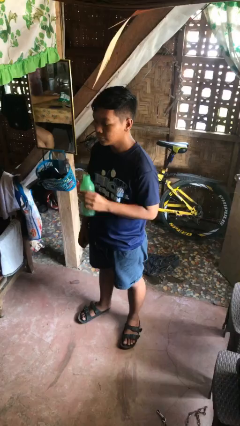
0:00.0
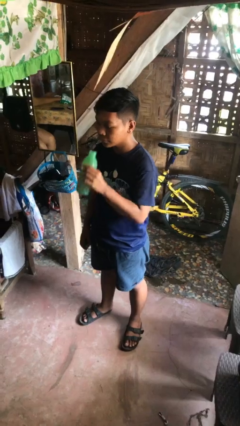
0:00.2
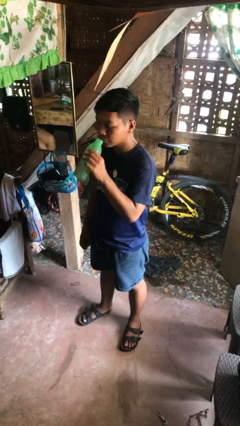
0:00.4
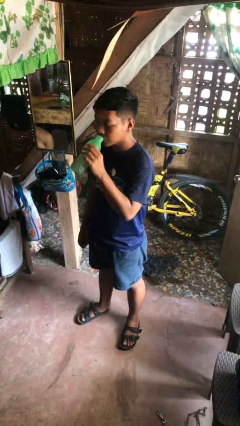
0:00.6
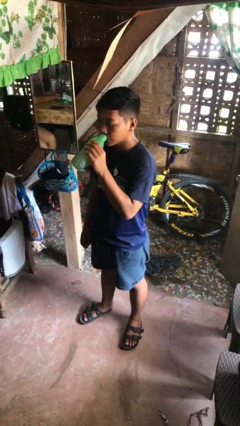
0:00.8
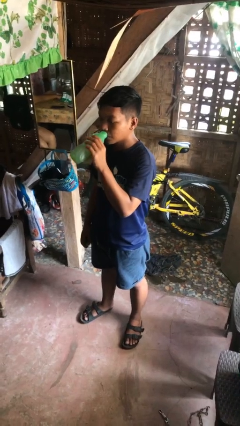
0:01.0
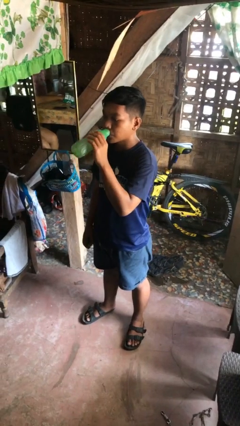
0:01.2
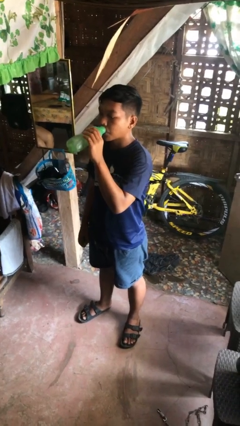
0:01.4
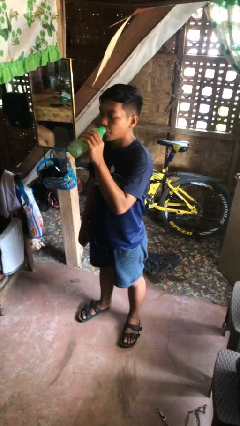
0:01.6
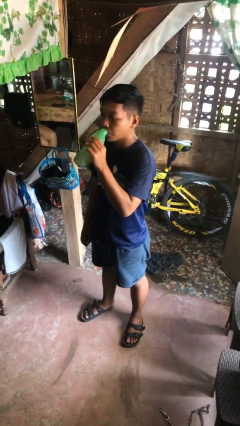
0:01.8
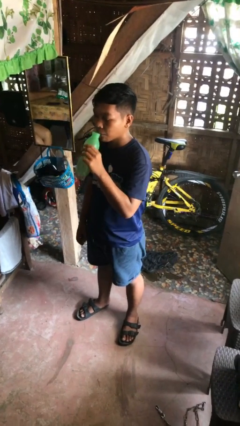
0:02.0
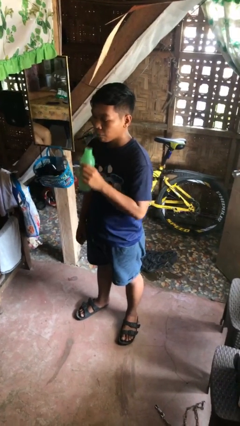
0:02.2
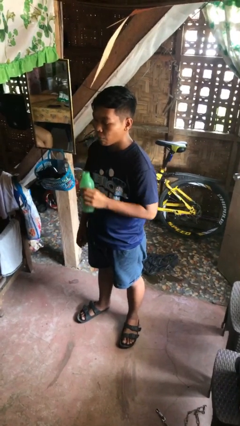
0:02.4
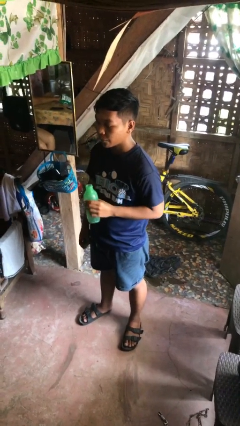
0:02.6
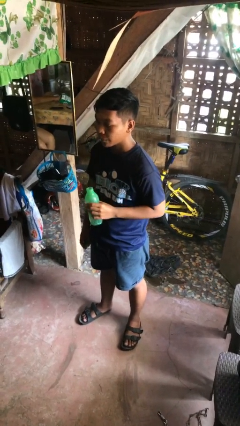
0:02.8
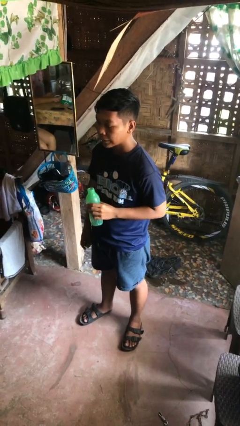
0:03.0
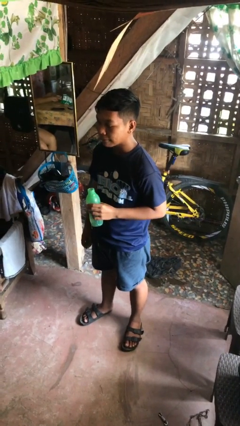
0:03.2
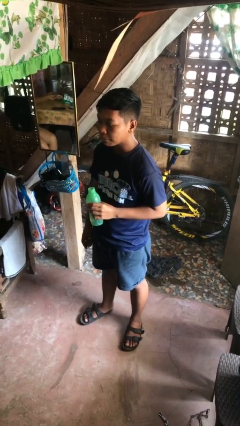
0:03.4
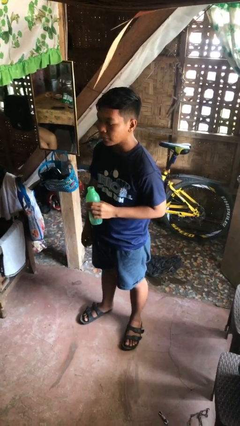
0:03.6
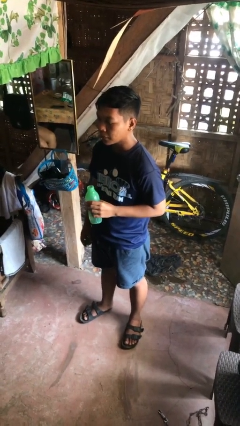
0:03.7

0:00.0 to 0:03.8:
person drinks from bottle

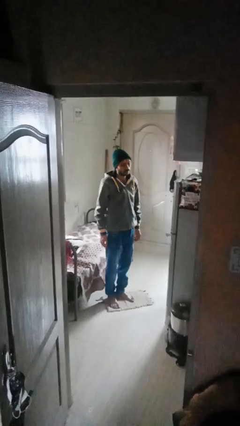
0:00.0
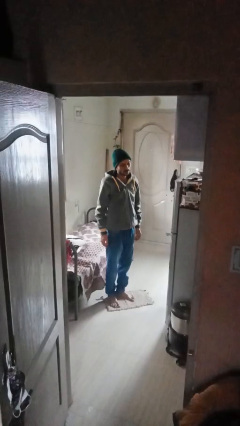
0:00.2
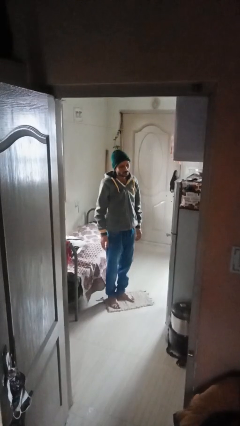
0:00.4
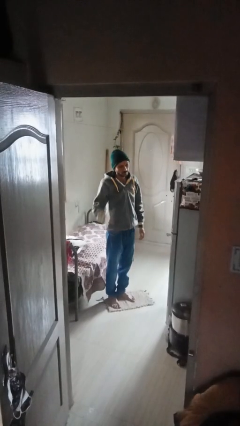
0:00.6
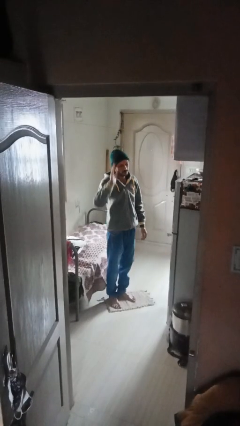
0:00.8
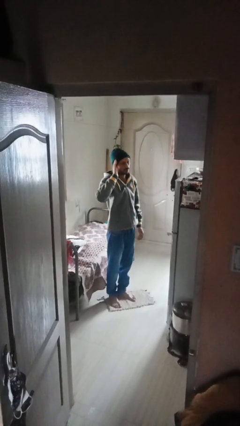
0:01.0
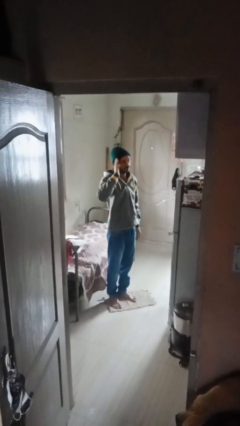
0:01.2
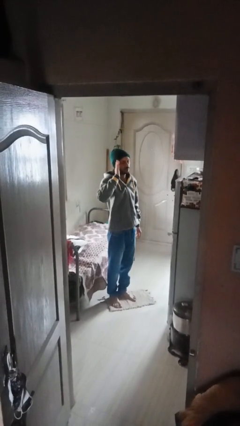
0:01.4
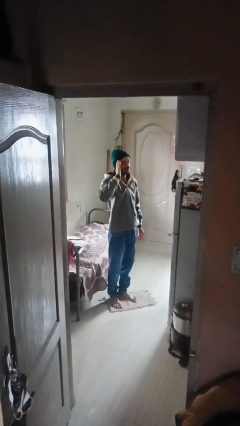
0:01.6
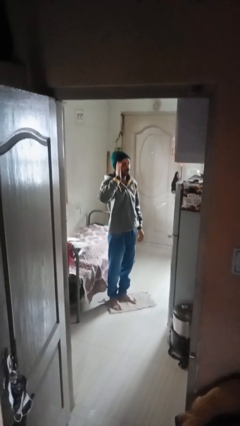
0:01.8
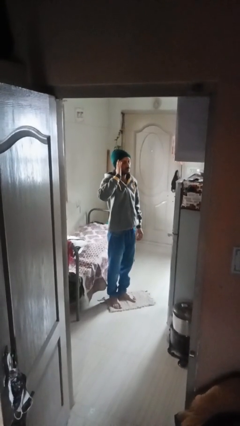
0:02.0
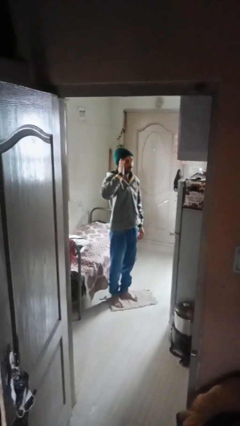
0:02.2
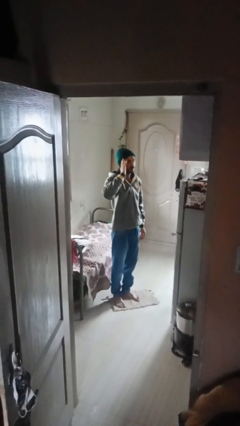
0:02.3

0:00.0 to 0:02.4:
person salutes

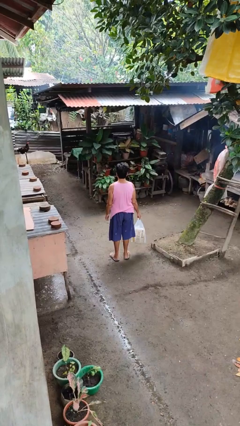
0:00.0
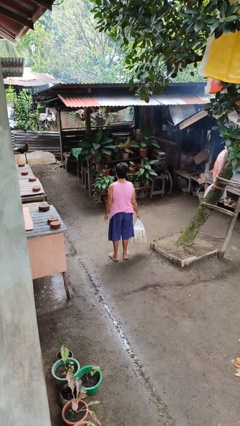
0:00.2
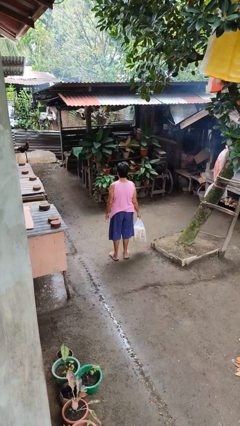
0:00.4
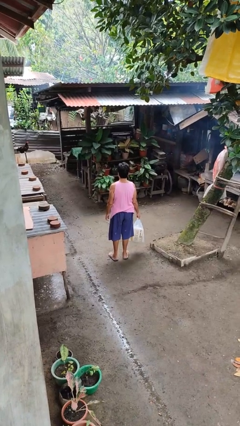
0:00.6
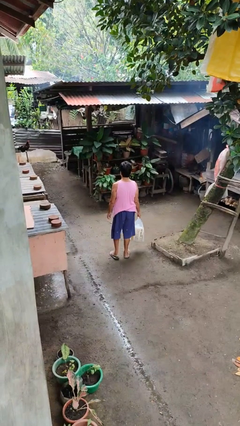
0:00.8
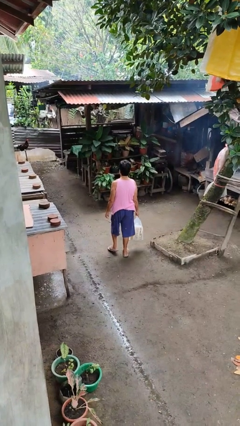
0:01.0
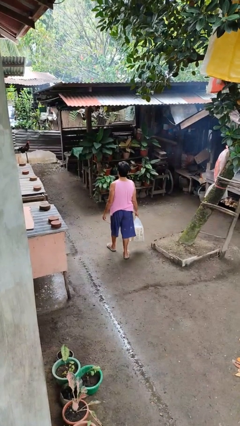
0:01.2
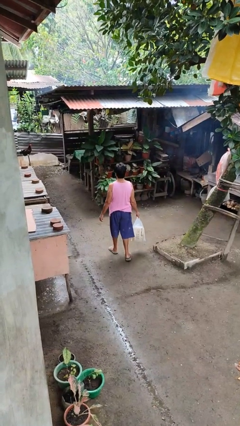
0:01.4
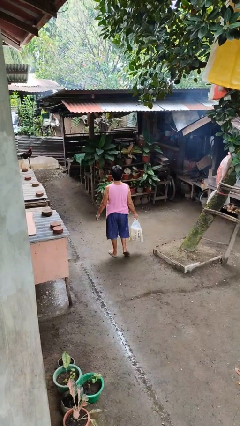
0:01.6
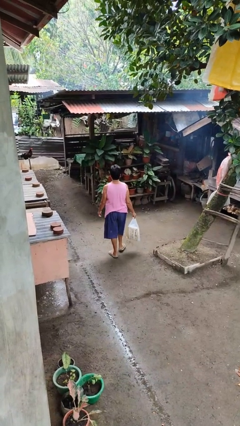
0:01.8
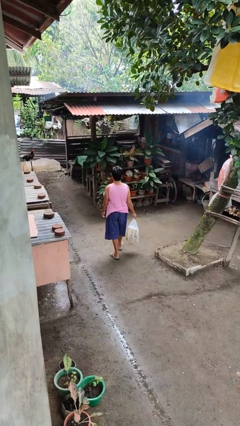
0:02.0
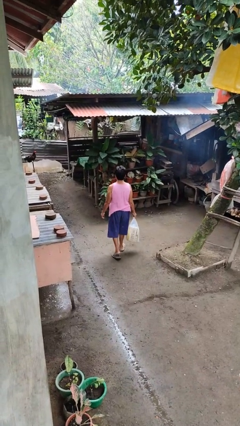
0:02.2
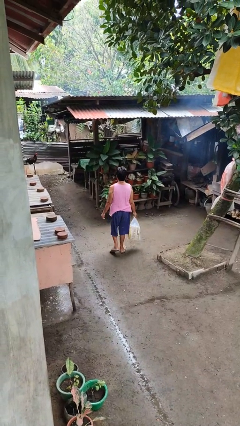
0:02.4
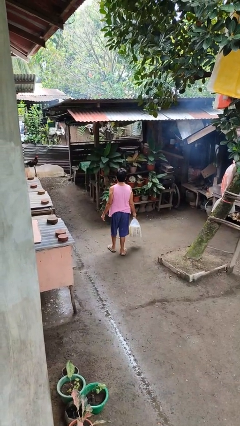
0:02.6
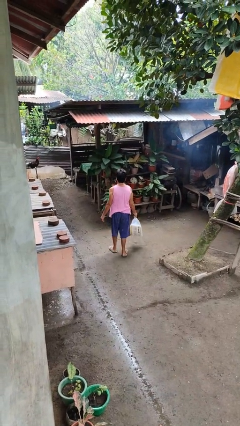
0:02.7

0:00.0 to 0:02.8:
person carries groceries

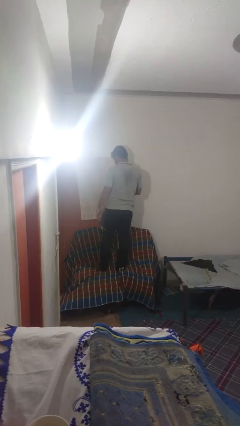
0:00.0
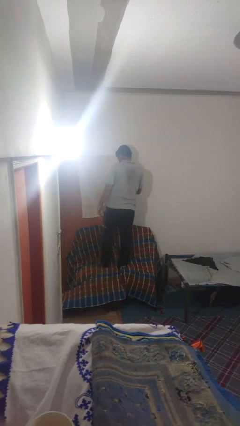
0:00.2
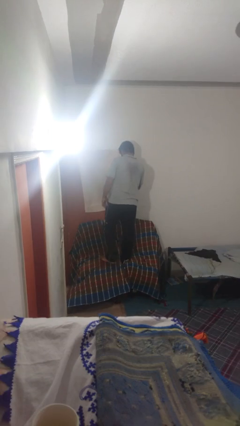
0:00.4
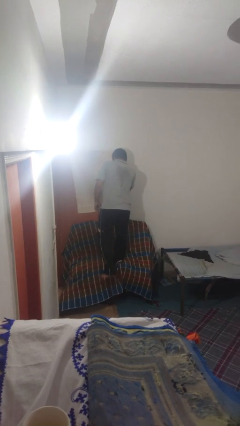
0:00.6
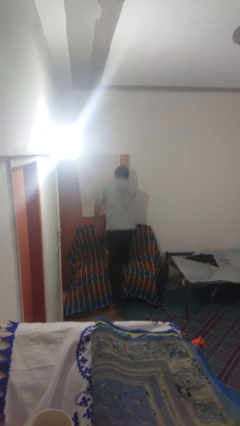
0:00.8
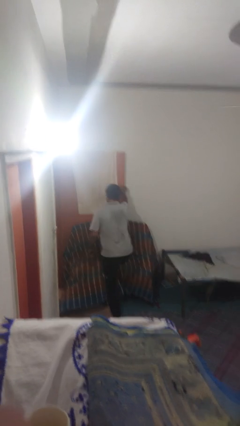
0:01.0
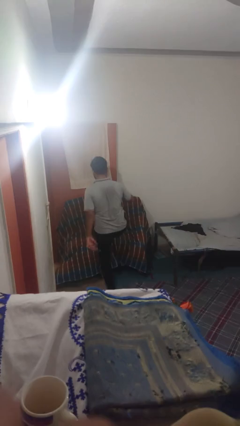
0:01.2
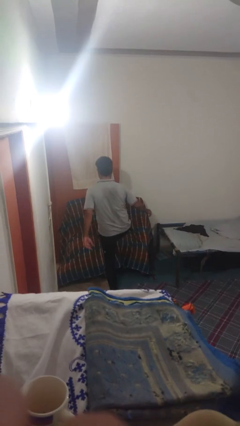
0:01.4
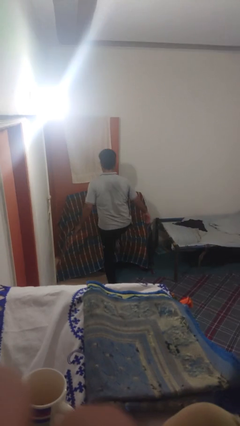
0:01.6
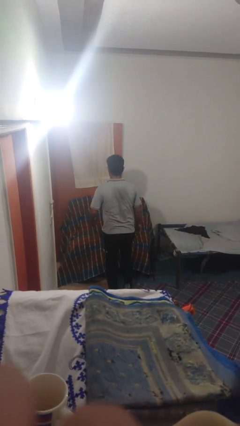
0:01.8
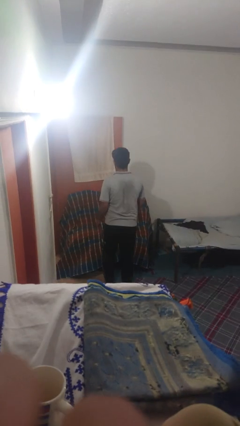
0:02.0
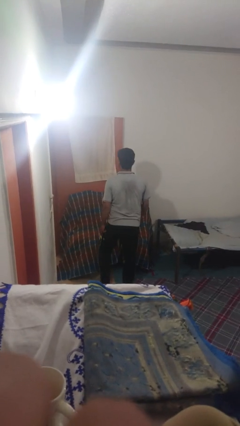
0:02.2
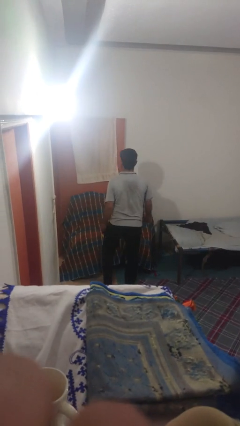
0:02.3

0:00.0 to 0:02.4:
person climbs off couch

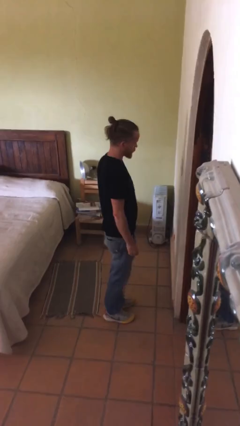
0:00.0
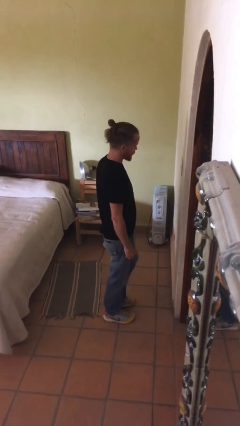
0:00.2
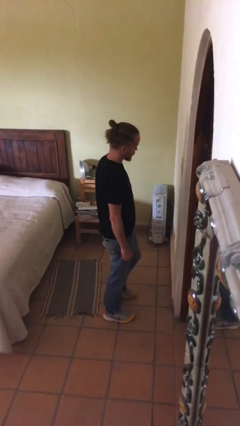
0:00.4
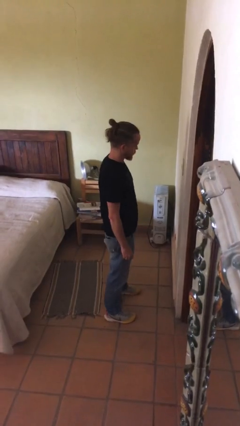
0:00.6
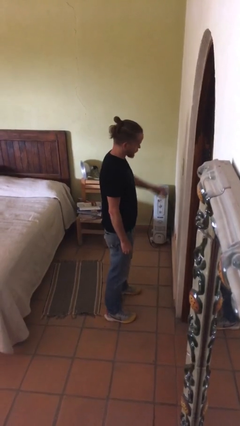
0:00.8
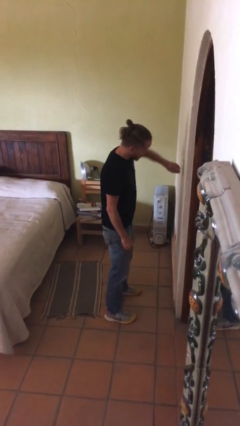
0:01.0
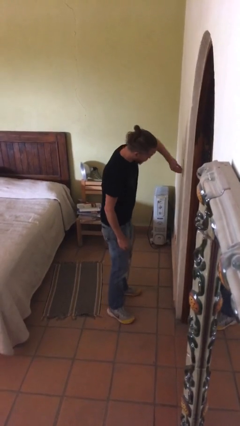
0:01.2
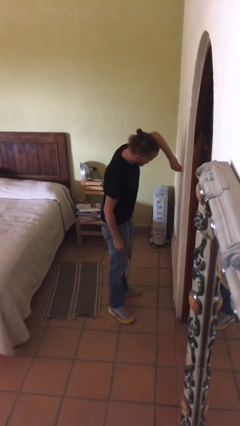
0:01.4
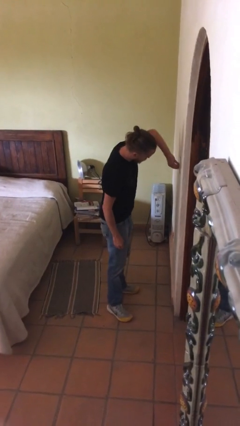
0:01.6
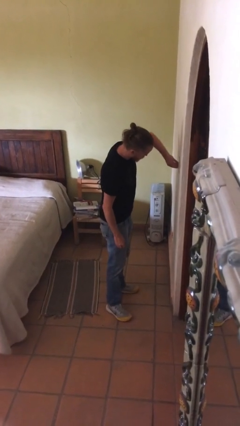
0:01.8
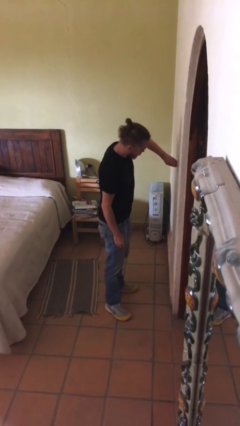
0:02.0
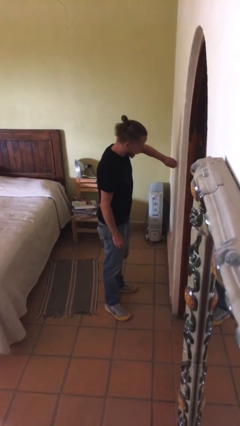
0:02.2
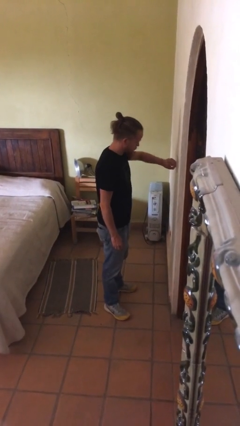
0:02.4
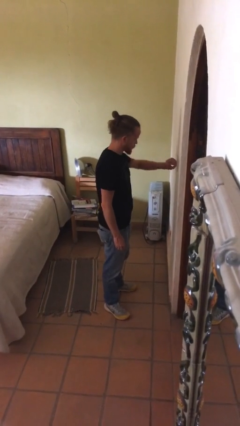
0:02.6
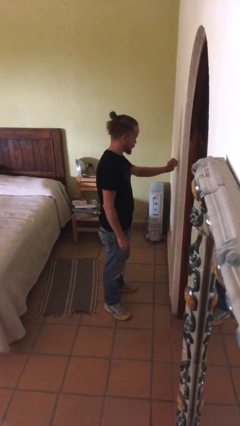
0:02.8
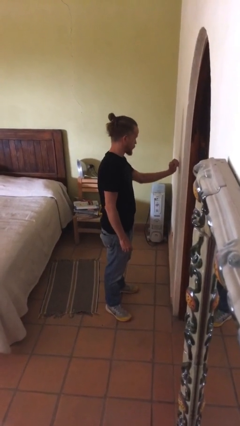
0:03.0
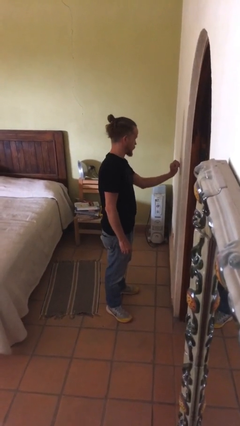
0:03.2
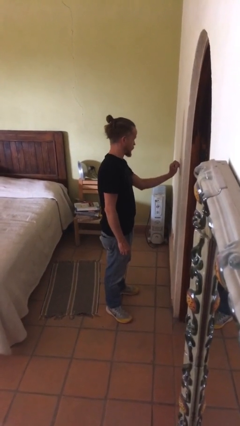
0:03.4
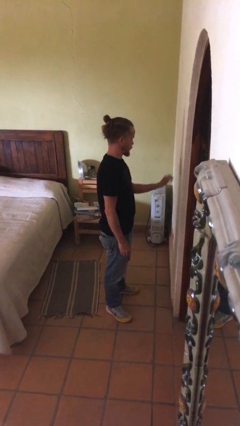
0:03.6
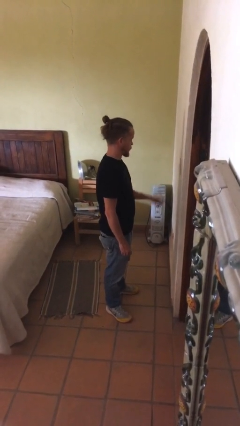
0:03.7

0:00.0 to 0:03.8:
person adjusts thermostat

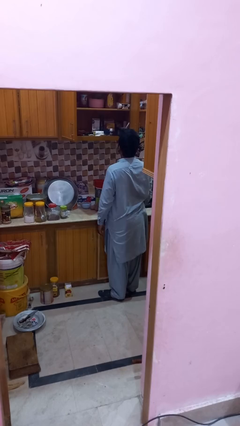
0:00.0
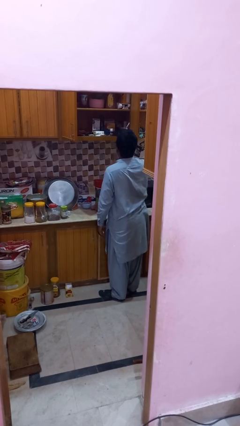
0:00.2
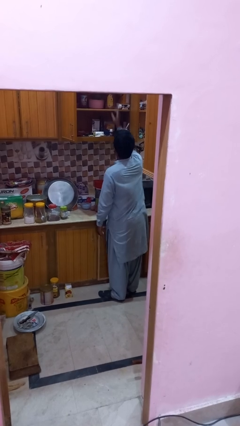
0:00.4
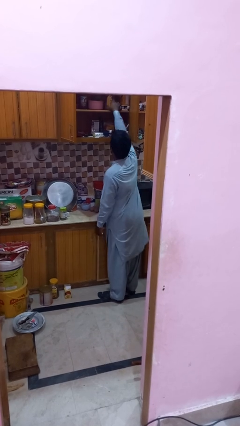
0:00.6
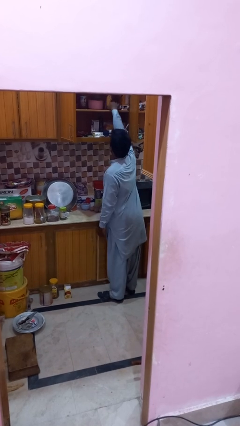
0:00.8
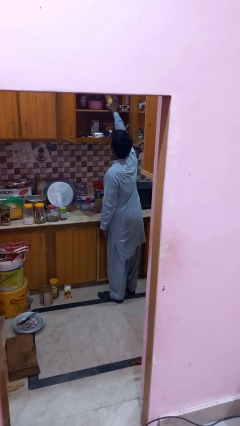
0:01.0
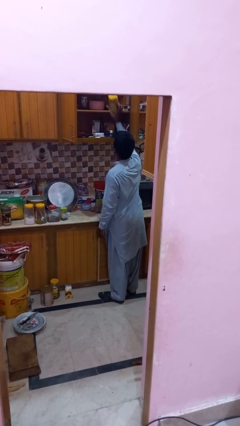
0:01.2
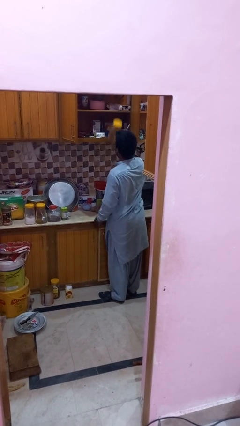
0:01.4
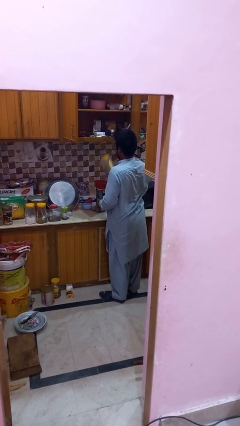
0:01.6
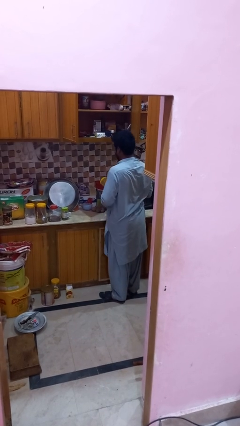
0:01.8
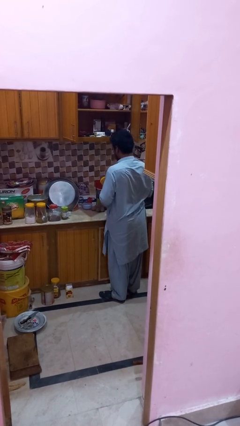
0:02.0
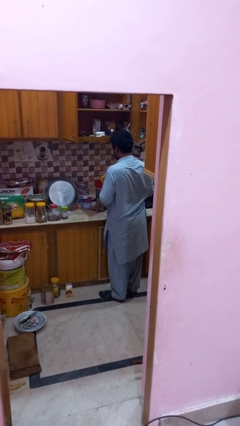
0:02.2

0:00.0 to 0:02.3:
person takes object from cabinet
